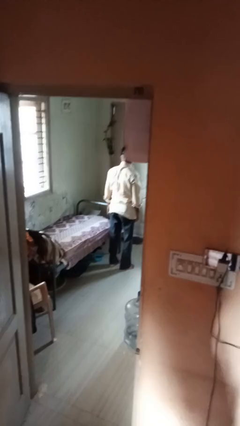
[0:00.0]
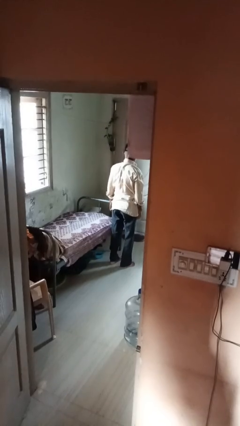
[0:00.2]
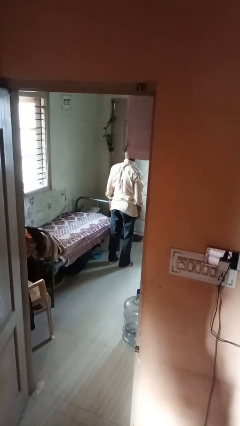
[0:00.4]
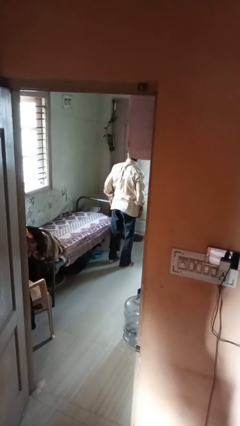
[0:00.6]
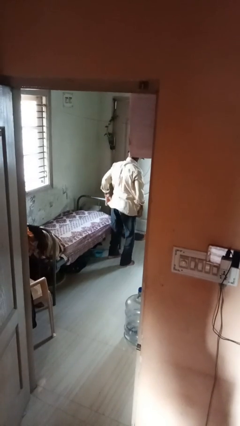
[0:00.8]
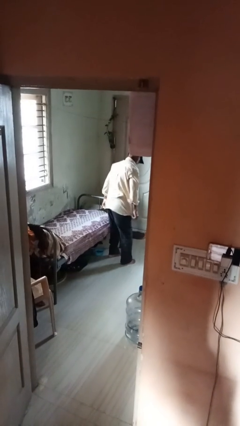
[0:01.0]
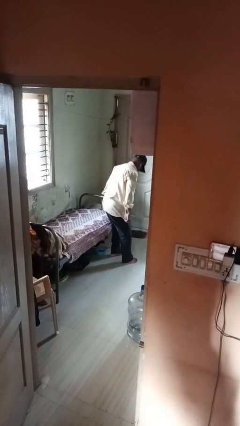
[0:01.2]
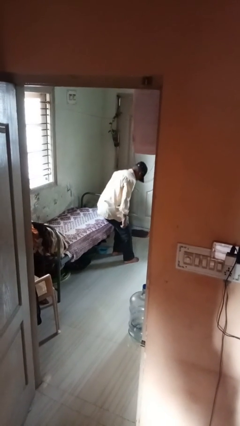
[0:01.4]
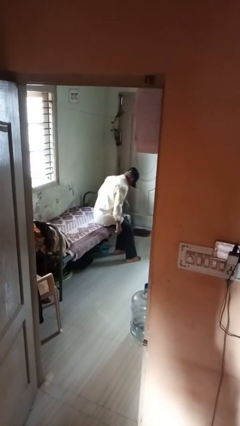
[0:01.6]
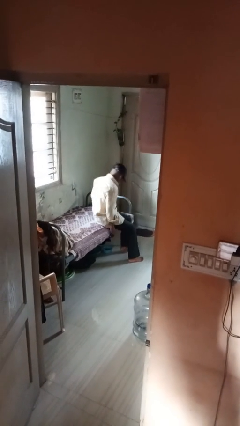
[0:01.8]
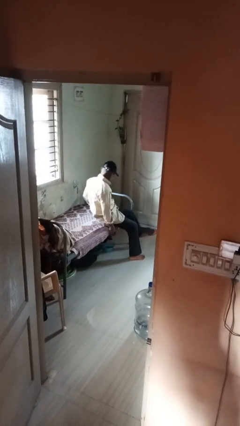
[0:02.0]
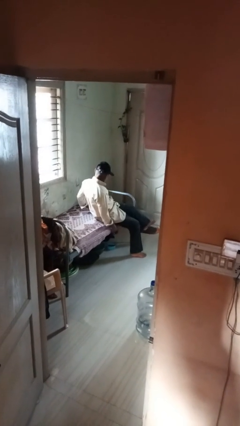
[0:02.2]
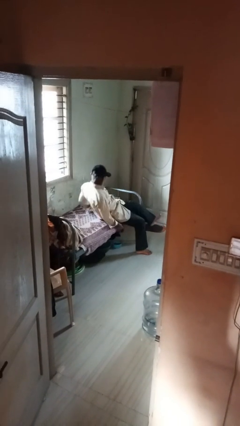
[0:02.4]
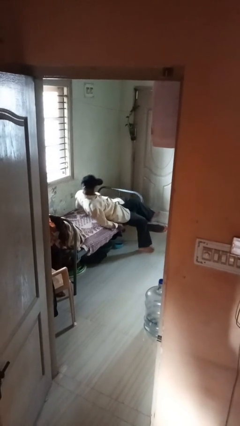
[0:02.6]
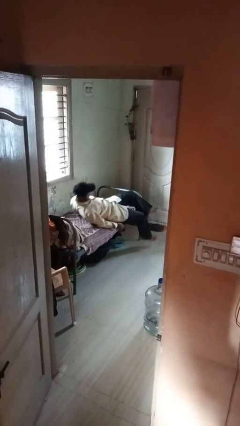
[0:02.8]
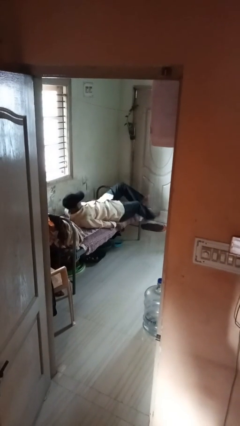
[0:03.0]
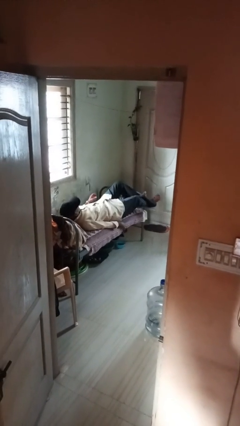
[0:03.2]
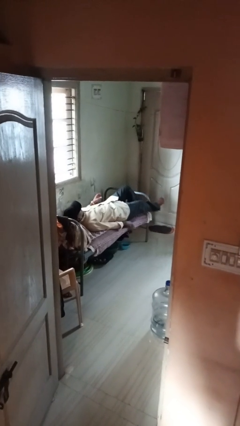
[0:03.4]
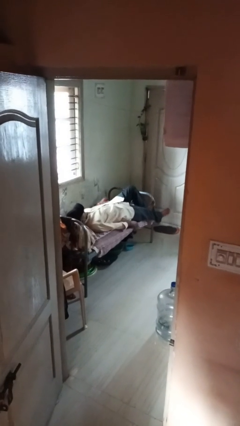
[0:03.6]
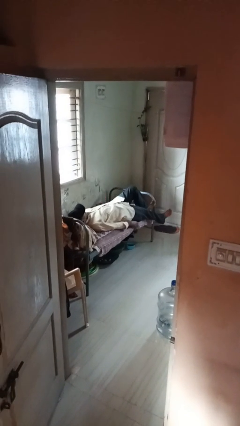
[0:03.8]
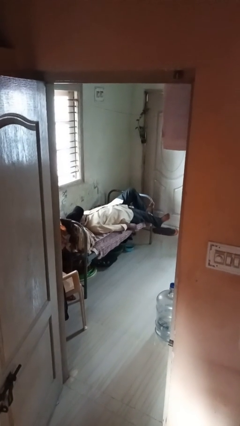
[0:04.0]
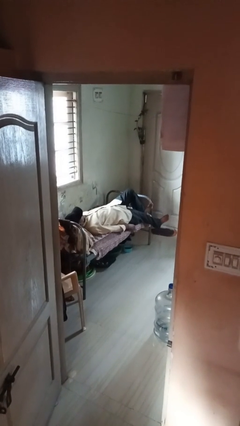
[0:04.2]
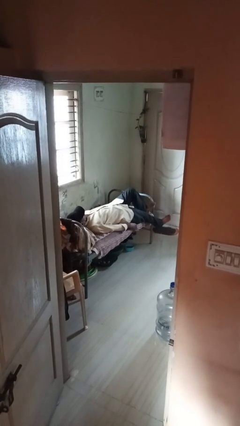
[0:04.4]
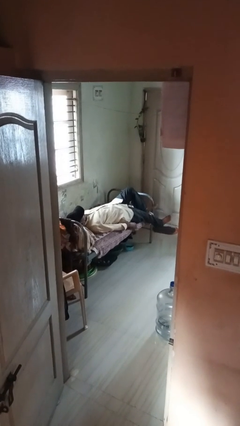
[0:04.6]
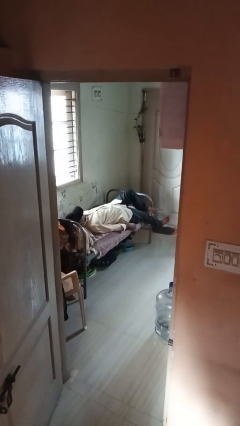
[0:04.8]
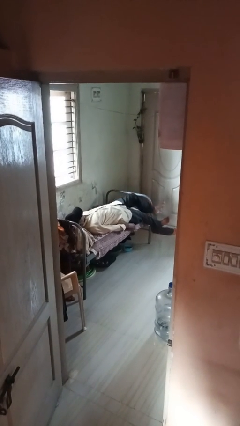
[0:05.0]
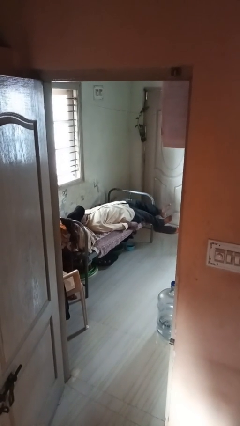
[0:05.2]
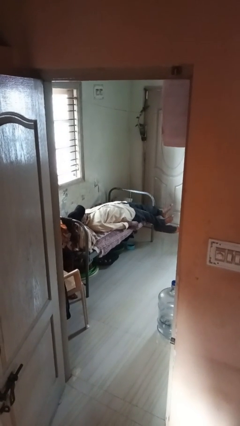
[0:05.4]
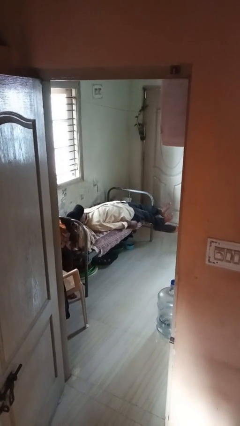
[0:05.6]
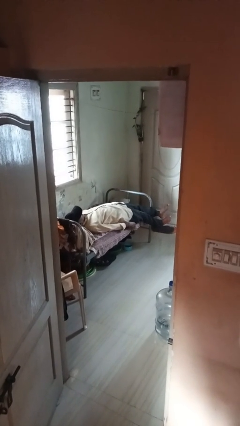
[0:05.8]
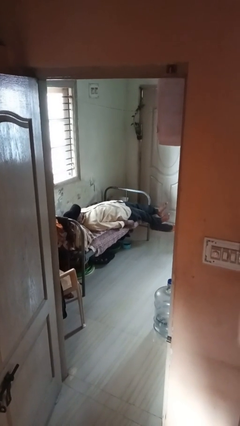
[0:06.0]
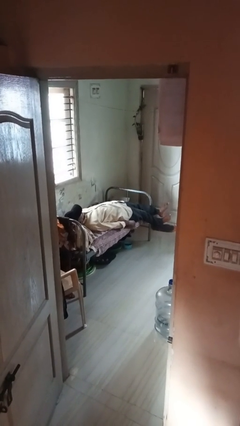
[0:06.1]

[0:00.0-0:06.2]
person lies down on bed

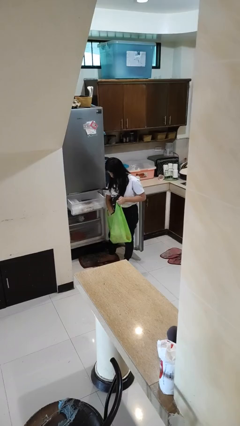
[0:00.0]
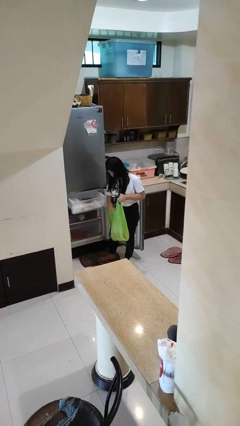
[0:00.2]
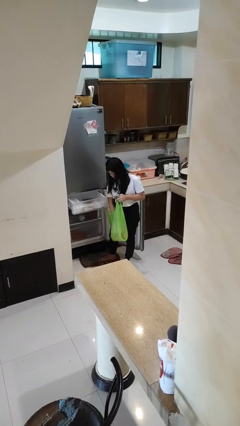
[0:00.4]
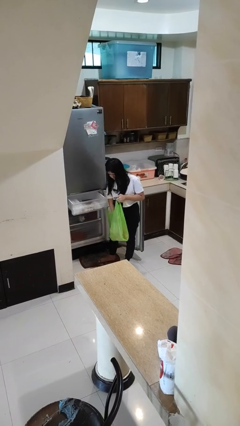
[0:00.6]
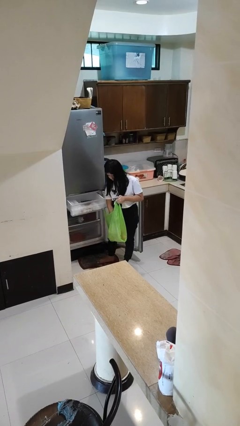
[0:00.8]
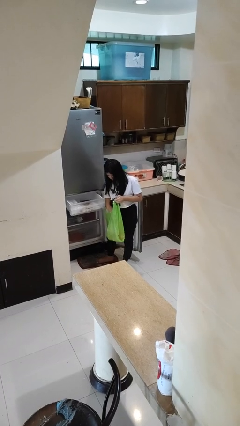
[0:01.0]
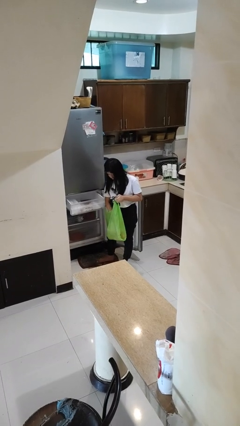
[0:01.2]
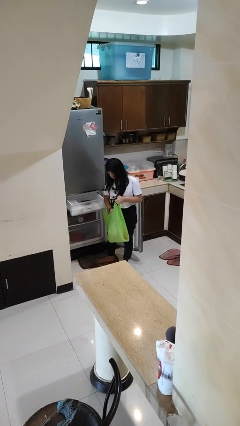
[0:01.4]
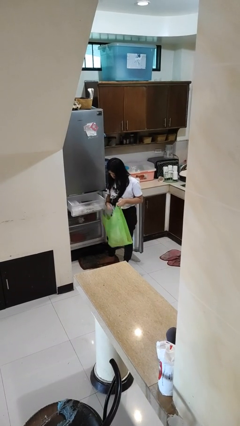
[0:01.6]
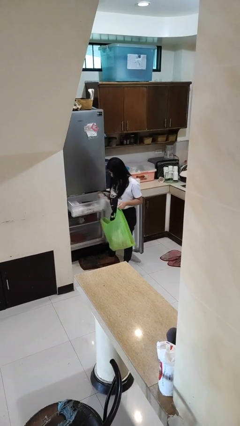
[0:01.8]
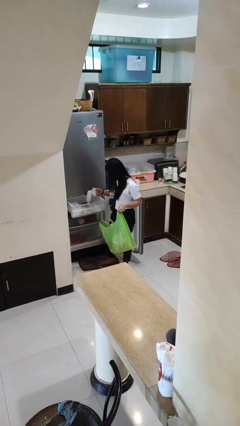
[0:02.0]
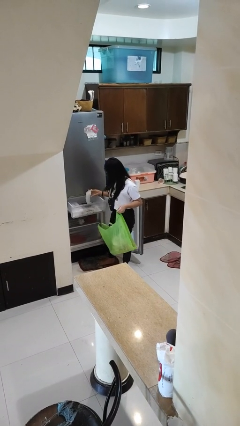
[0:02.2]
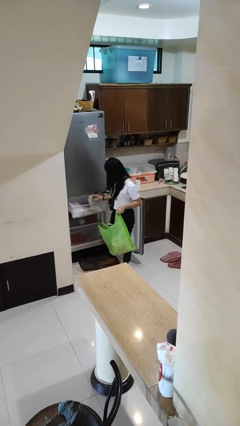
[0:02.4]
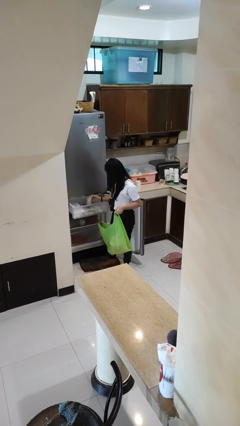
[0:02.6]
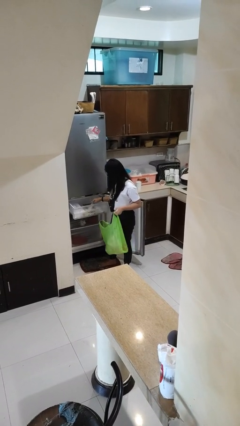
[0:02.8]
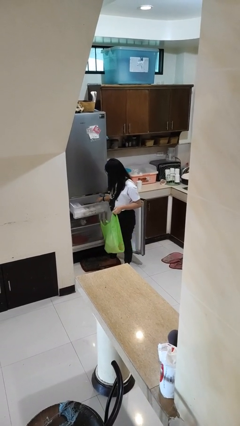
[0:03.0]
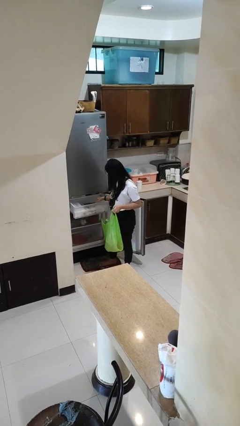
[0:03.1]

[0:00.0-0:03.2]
person loads groceries into refrigerator

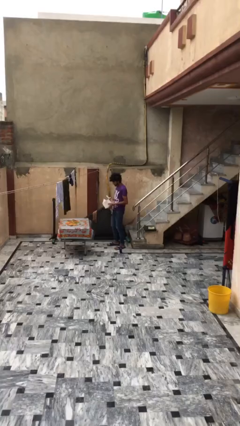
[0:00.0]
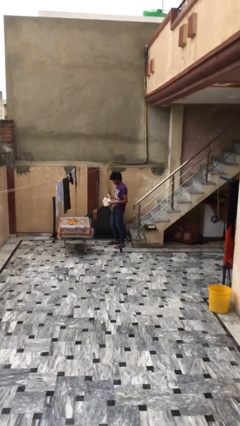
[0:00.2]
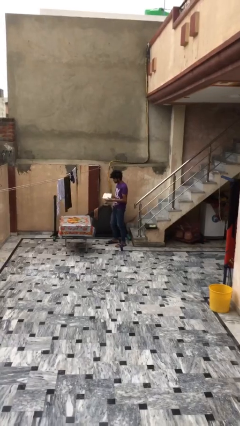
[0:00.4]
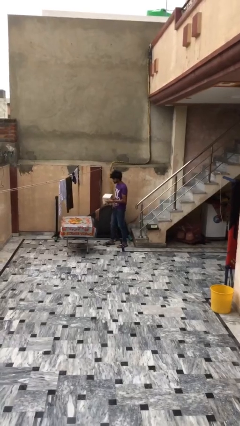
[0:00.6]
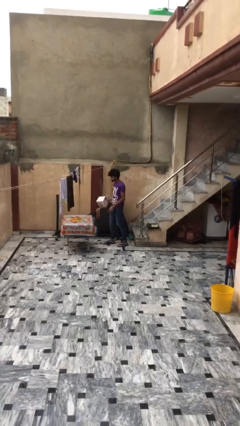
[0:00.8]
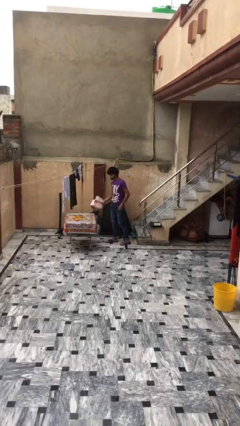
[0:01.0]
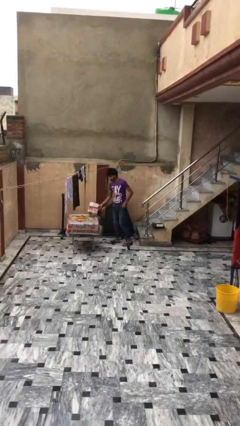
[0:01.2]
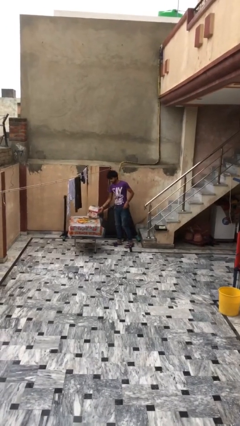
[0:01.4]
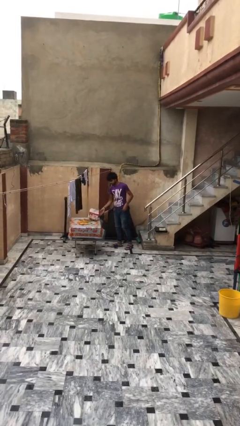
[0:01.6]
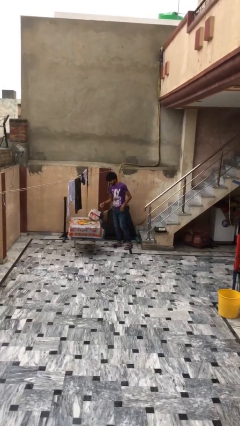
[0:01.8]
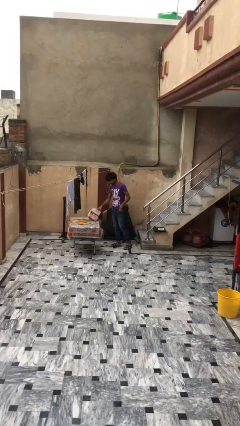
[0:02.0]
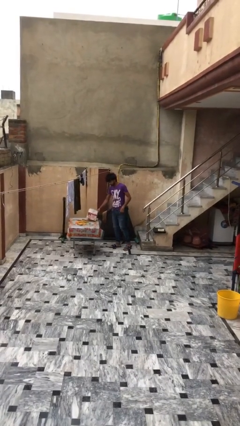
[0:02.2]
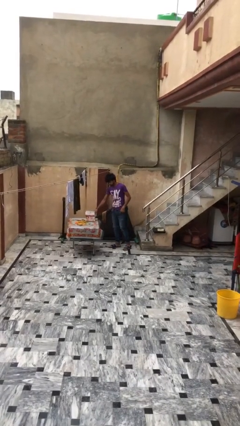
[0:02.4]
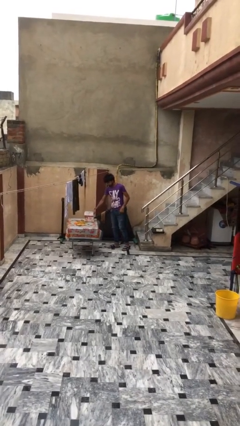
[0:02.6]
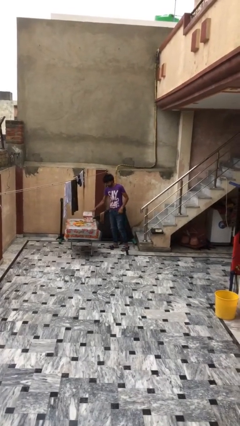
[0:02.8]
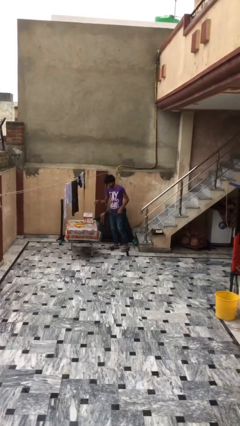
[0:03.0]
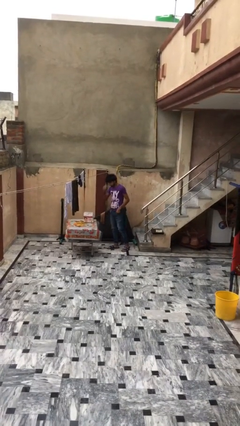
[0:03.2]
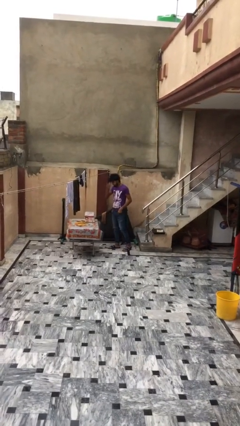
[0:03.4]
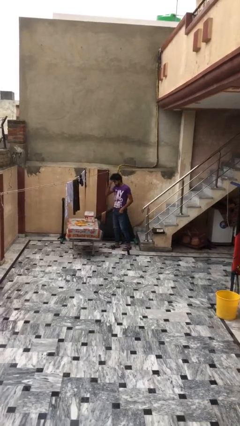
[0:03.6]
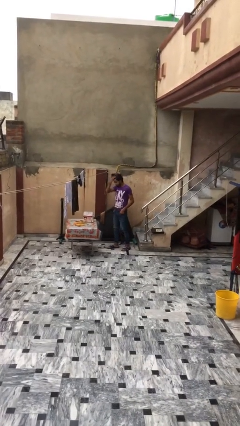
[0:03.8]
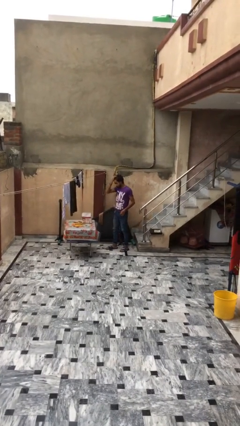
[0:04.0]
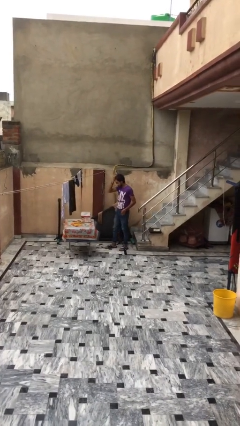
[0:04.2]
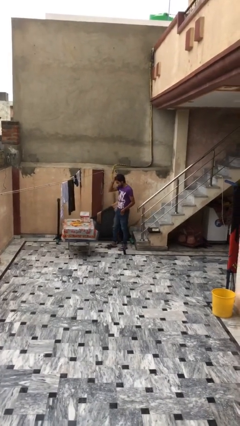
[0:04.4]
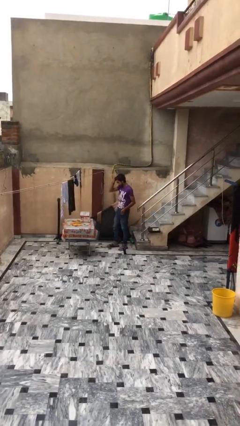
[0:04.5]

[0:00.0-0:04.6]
person puts down object on table

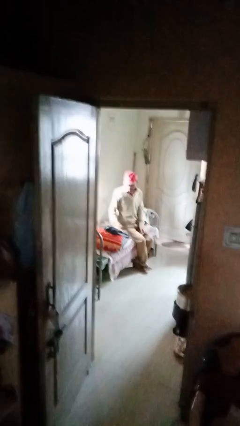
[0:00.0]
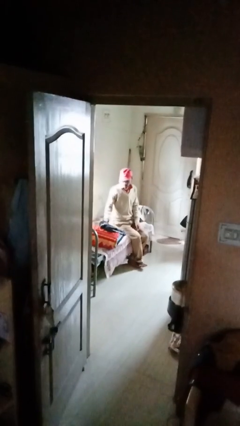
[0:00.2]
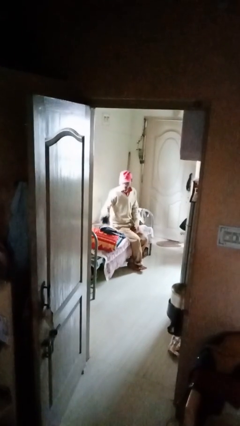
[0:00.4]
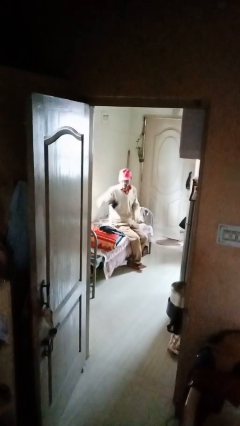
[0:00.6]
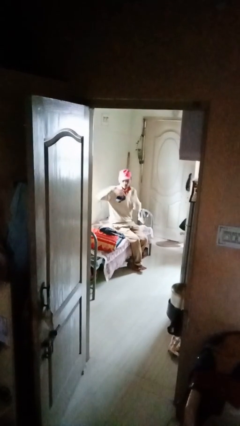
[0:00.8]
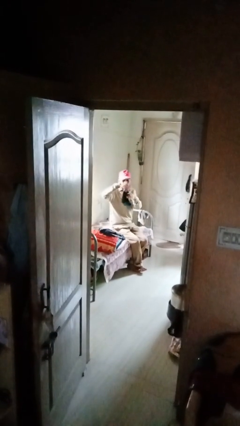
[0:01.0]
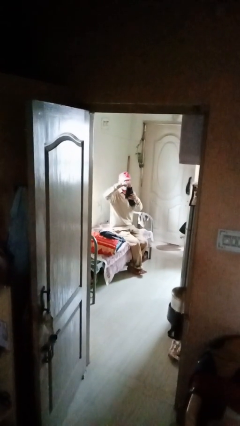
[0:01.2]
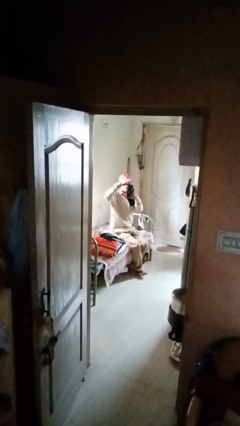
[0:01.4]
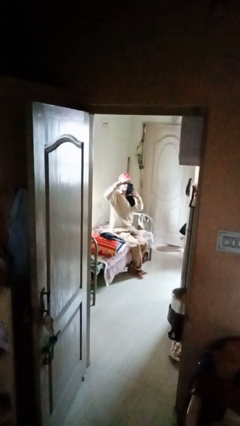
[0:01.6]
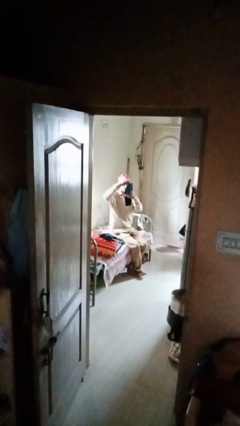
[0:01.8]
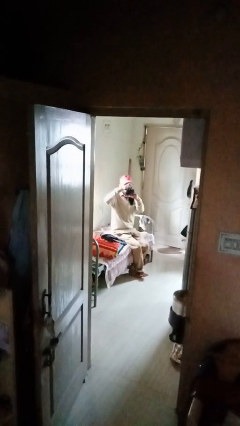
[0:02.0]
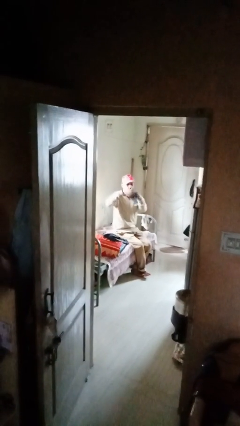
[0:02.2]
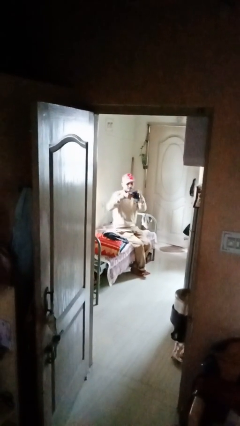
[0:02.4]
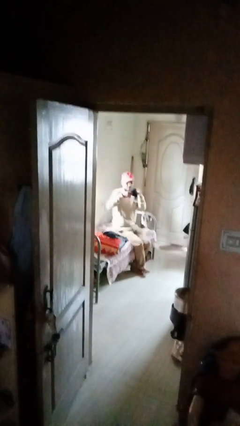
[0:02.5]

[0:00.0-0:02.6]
person folds socks

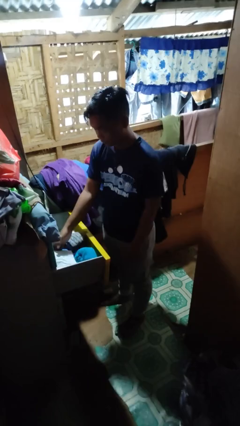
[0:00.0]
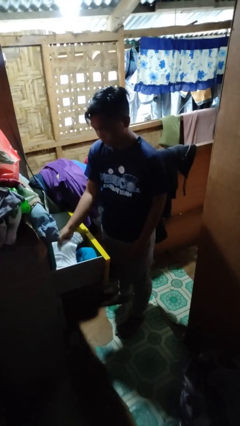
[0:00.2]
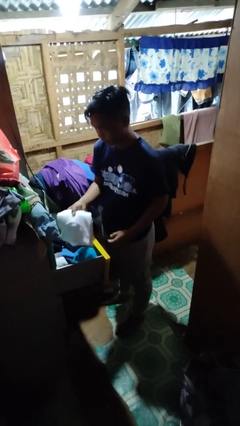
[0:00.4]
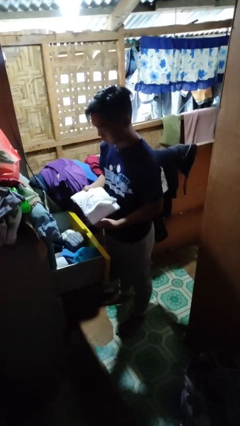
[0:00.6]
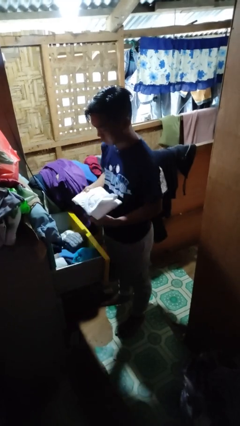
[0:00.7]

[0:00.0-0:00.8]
person takes clothes from dresser
